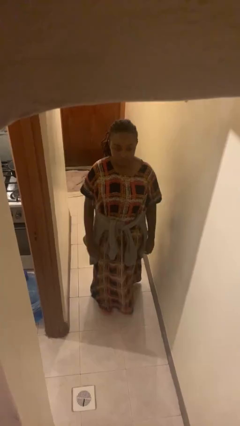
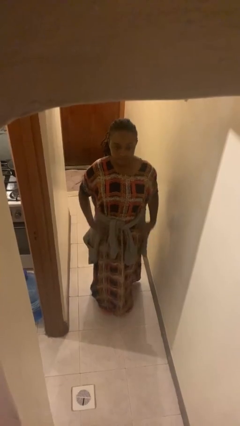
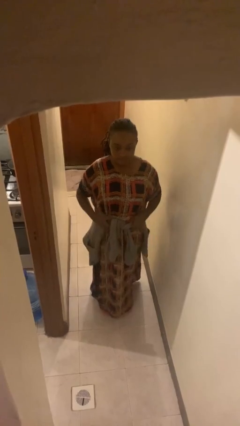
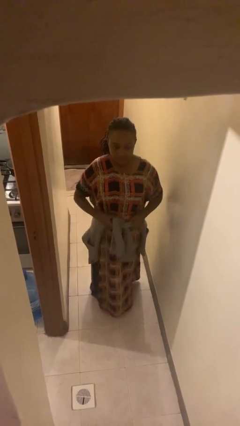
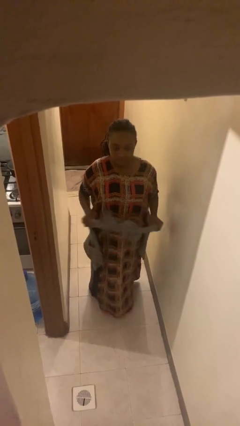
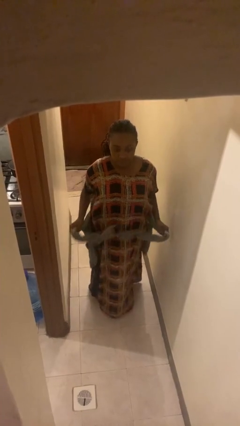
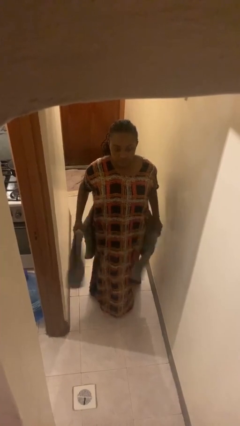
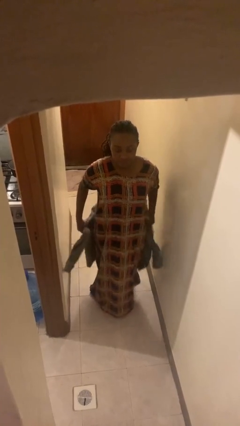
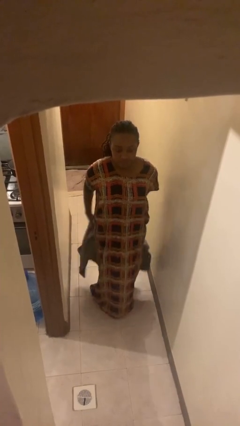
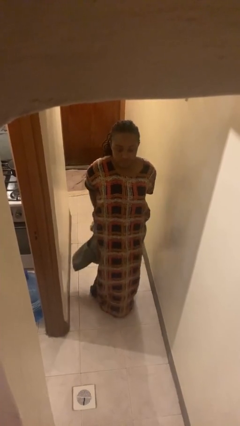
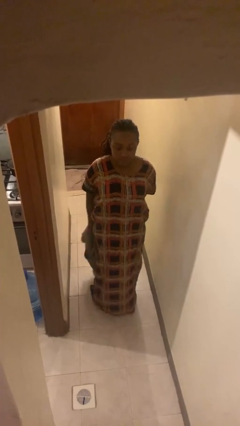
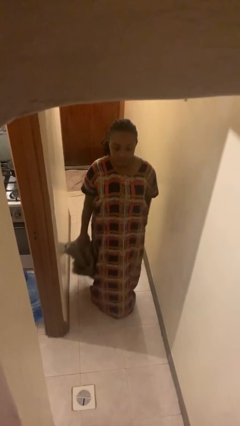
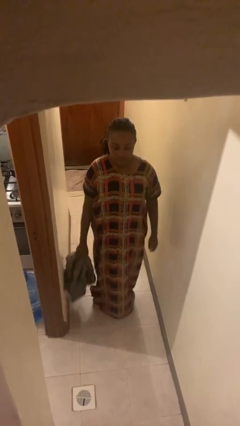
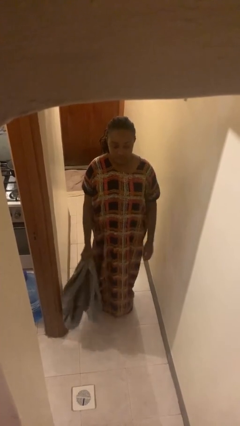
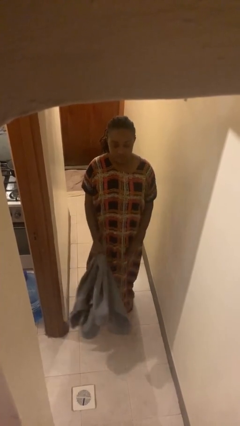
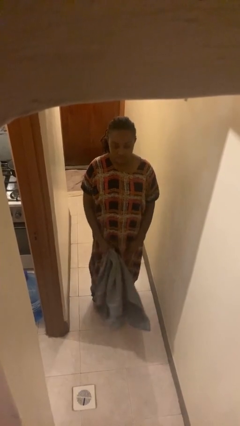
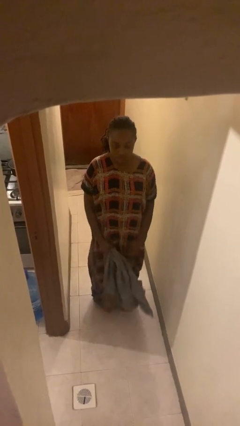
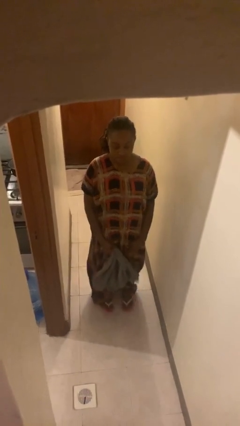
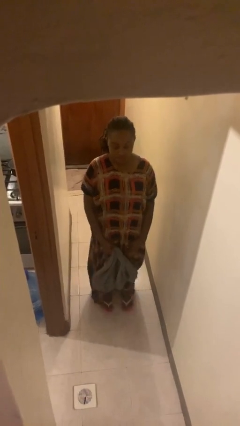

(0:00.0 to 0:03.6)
person unties jacket around waist

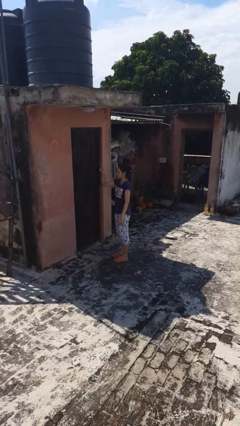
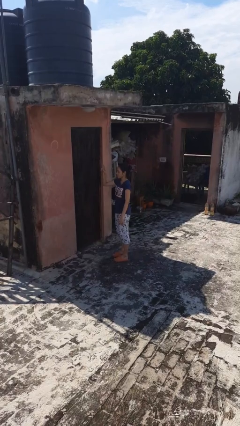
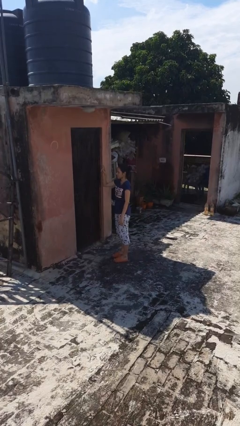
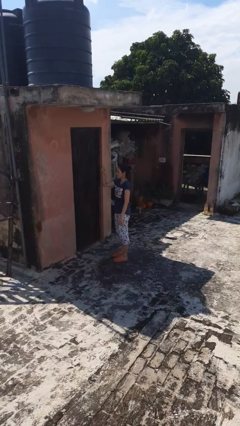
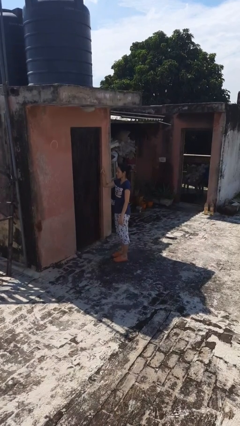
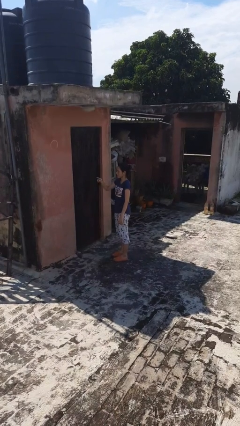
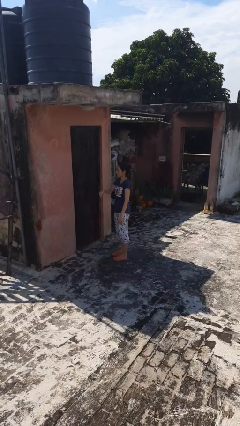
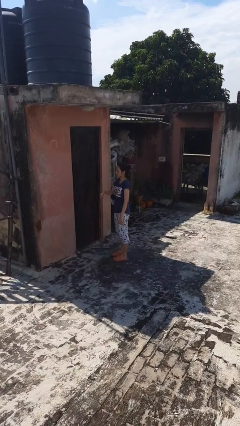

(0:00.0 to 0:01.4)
person gestures swipe up

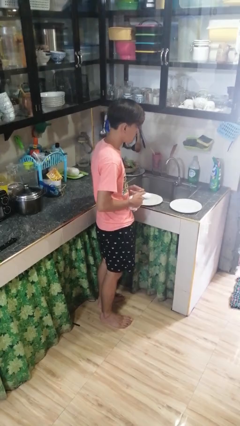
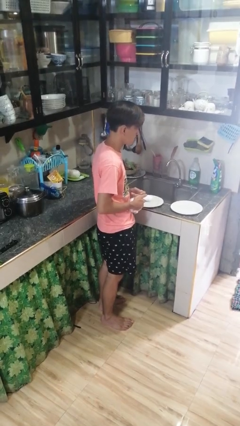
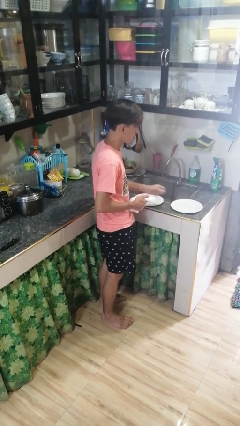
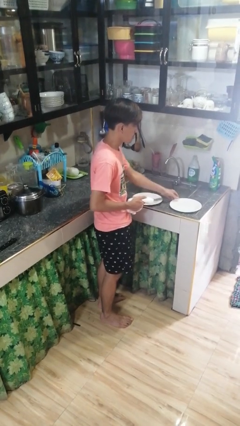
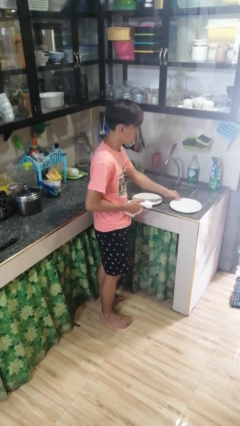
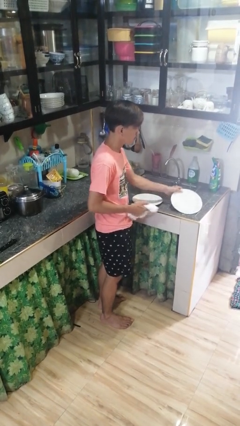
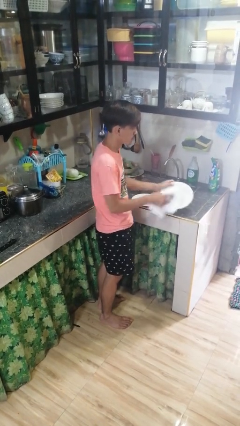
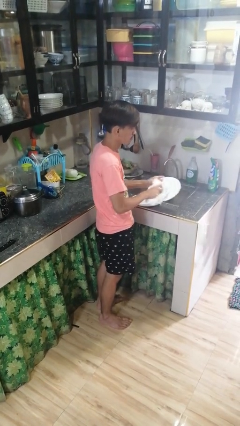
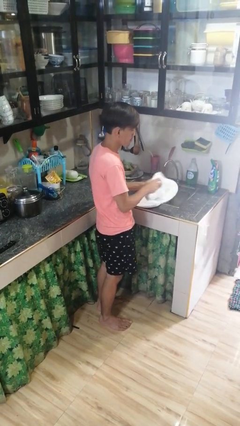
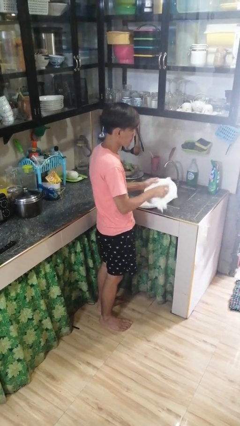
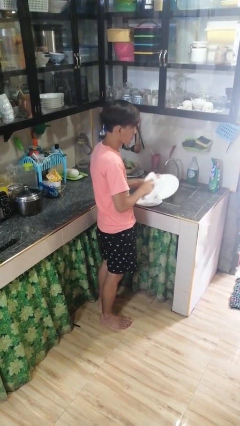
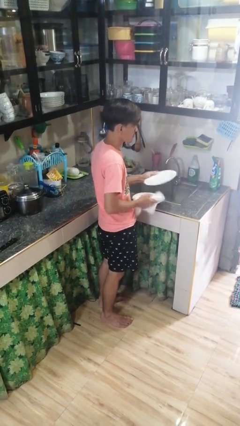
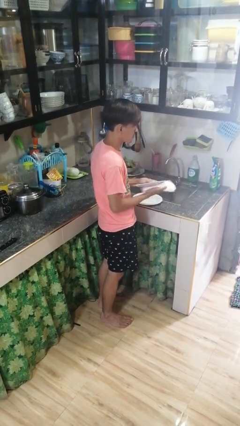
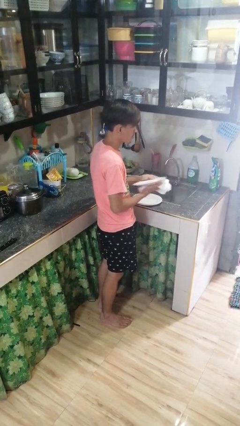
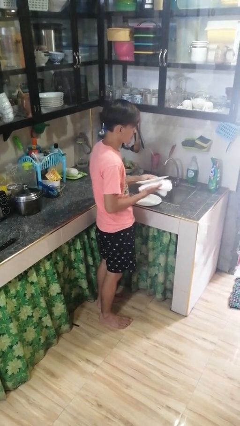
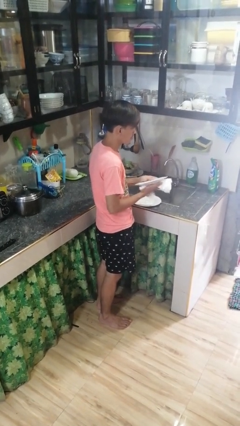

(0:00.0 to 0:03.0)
person dries dish

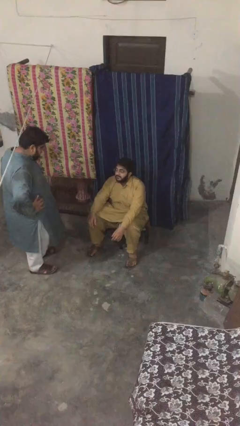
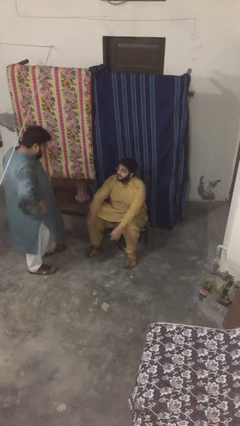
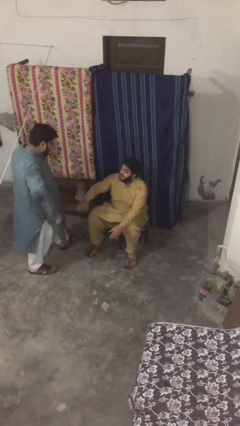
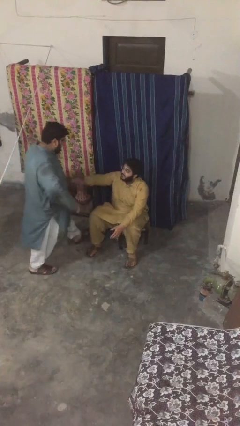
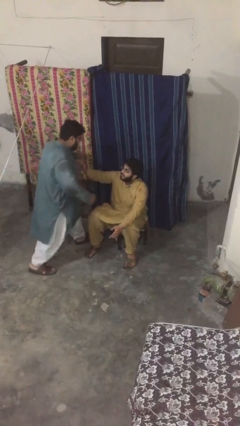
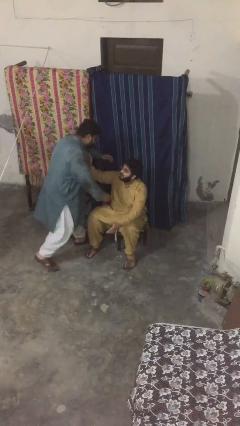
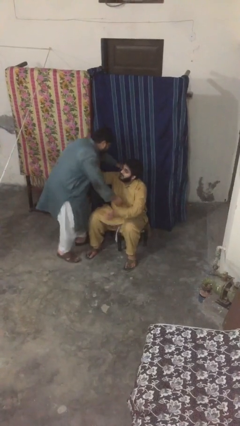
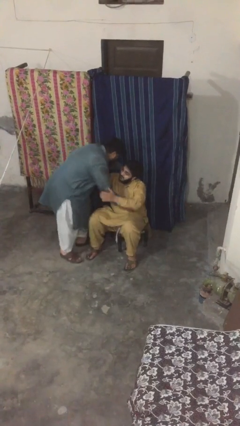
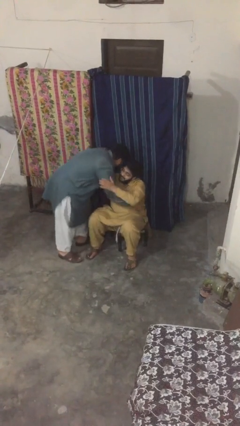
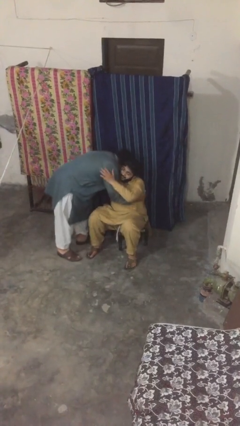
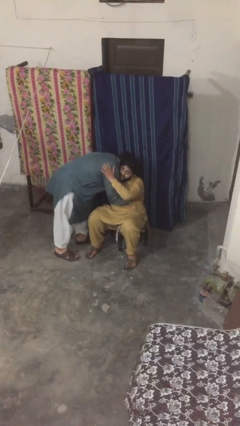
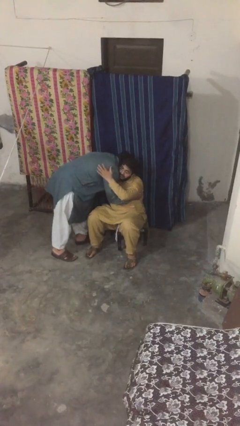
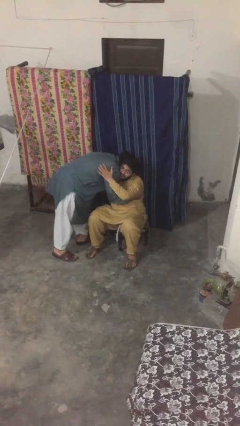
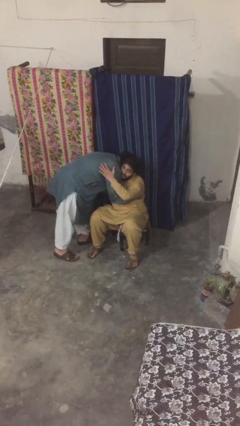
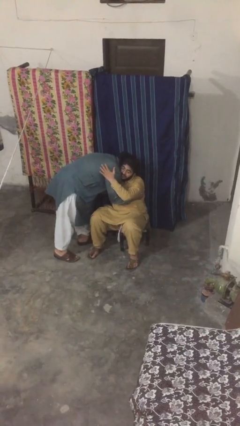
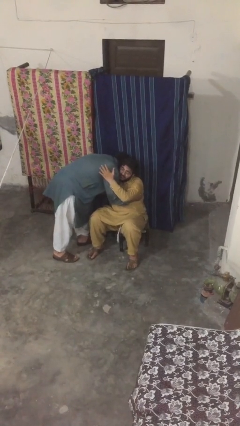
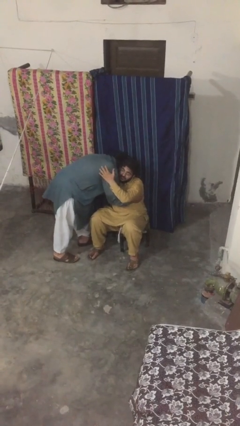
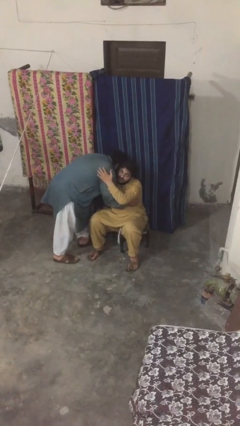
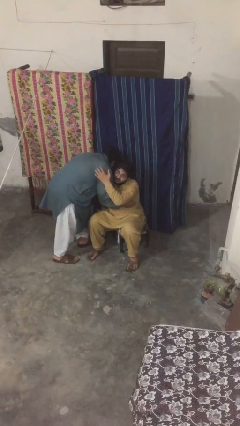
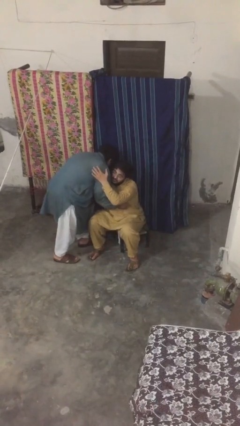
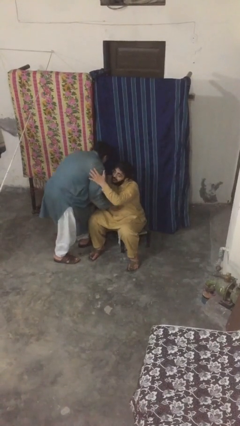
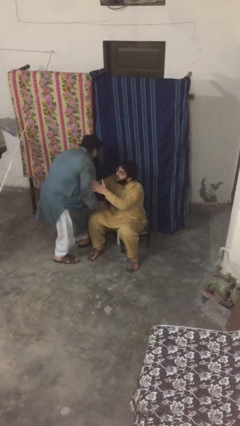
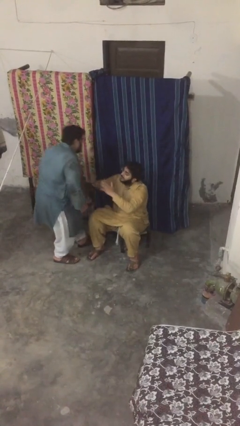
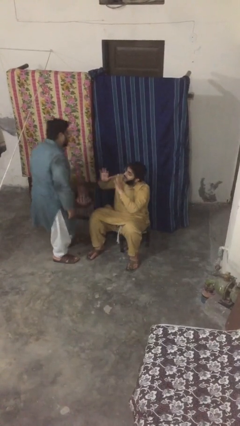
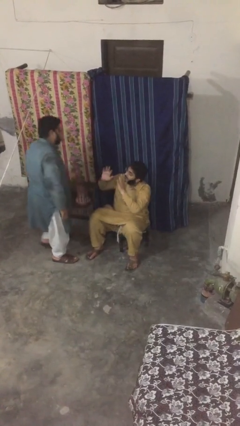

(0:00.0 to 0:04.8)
person embraces person

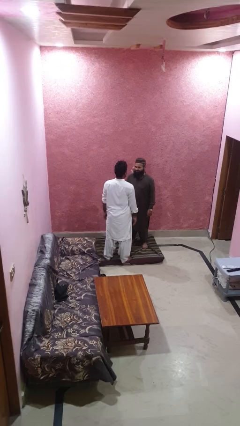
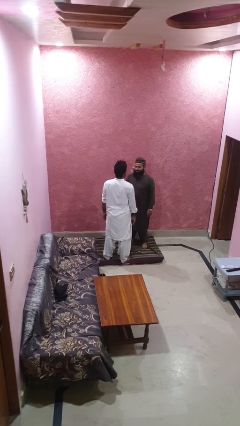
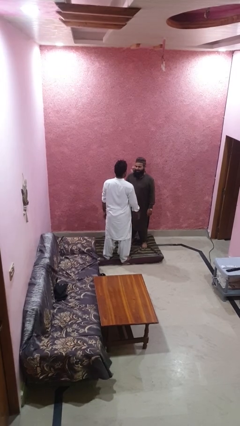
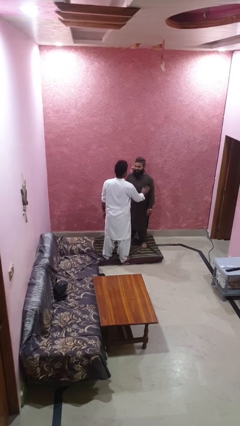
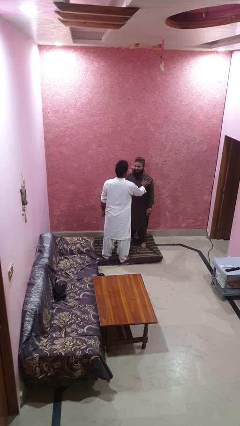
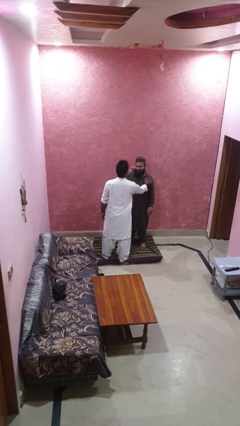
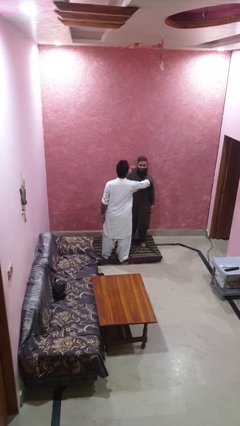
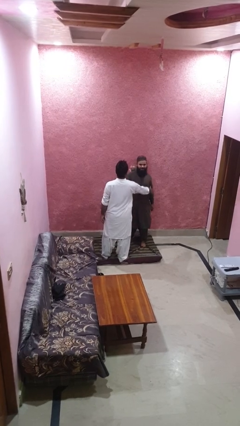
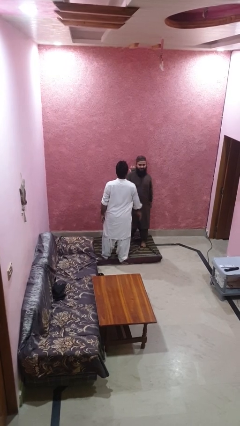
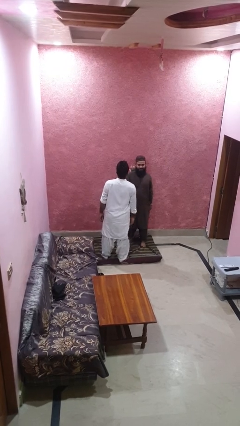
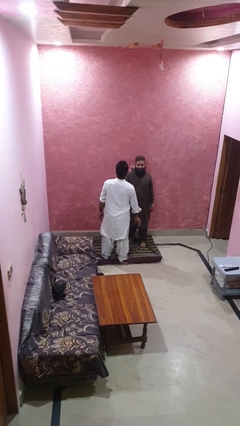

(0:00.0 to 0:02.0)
person shoves person

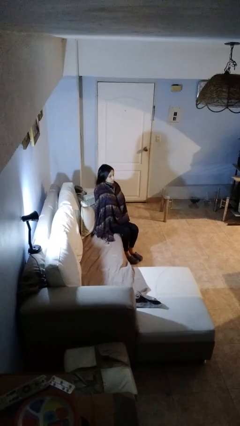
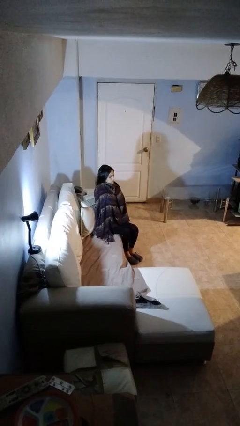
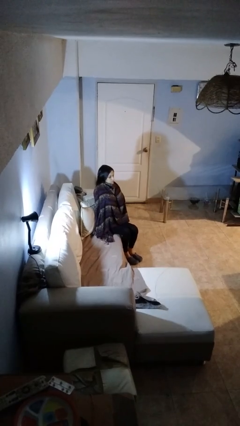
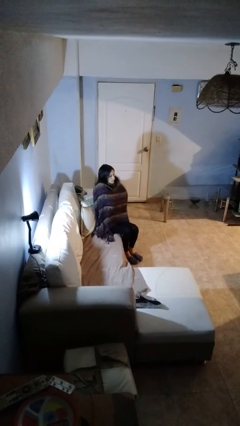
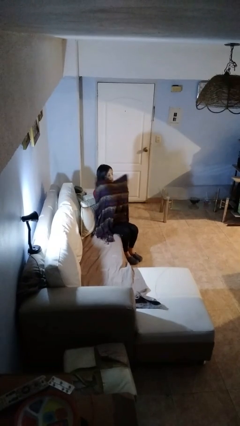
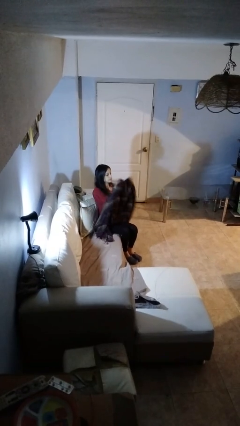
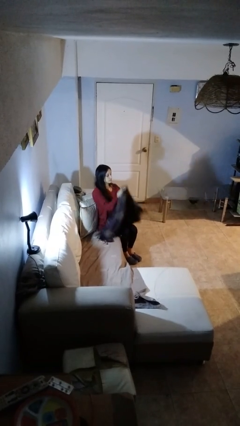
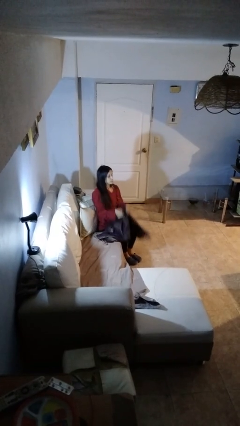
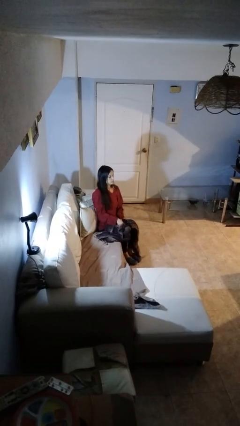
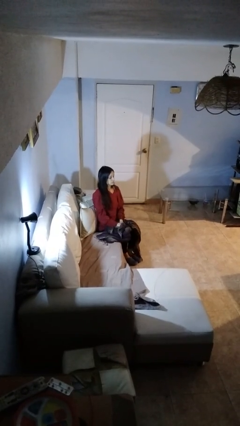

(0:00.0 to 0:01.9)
person uncovers with blanket

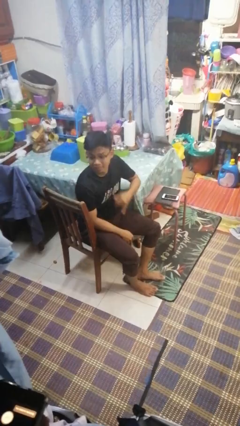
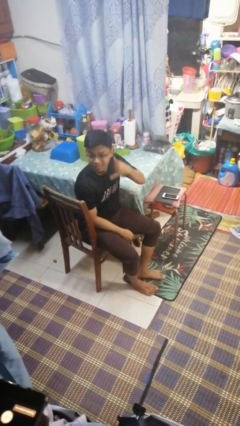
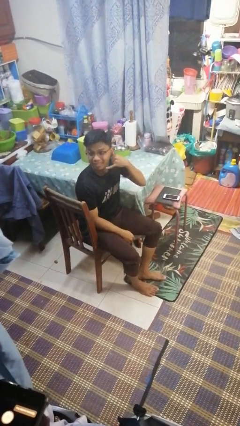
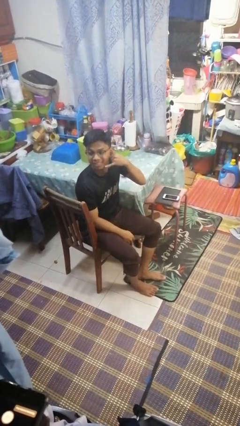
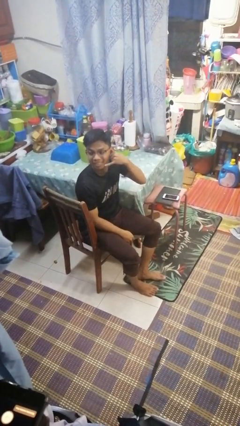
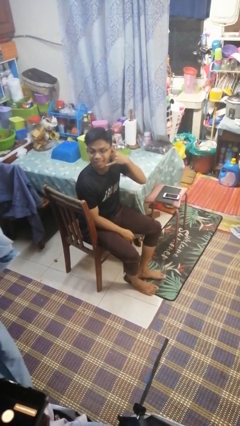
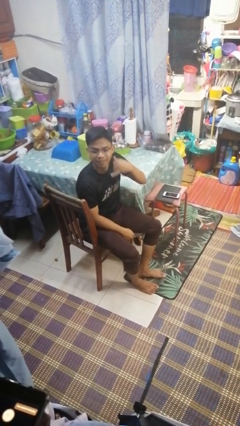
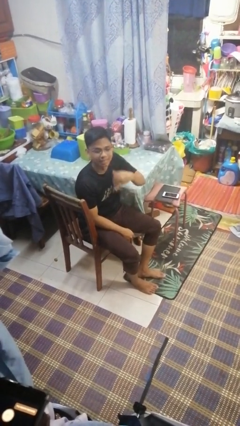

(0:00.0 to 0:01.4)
person gestures call me
